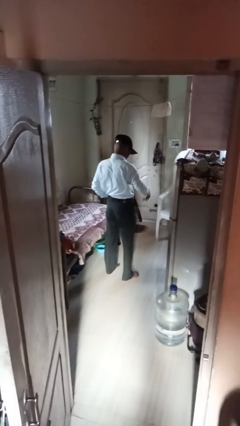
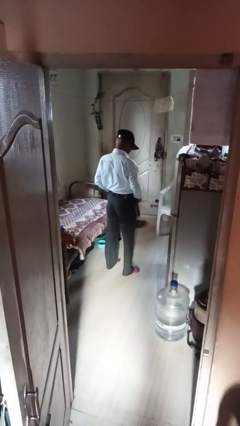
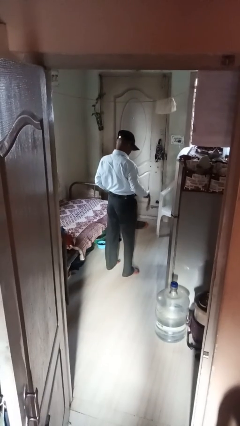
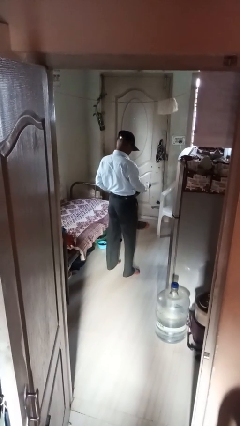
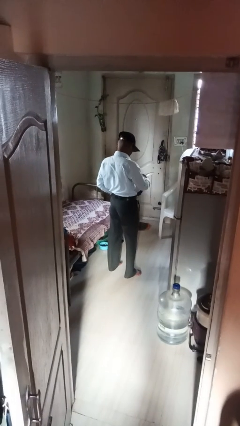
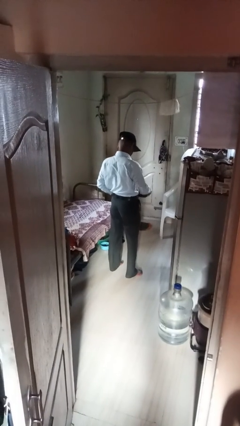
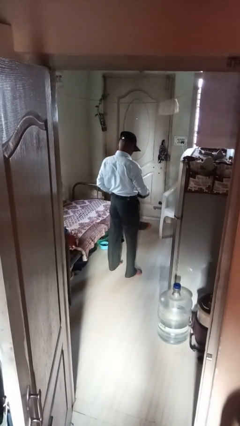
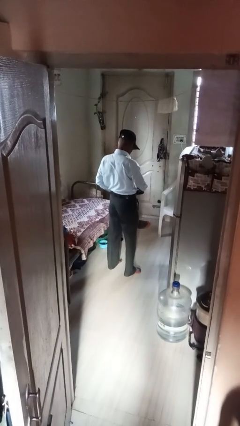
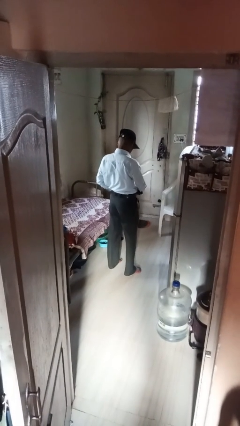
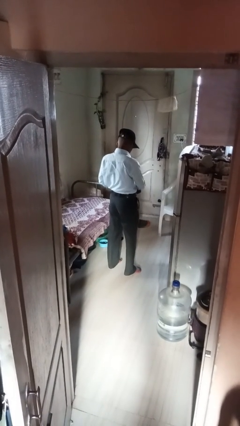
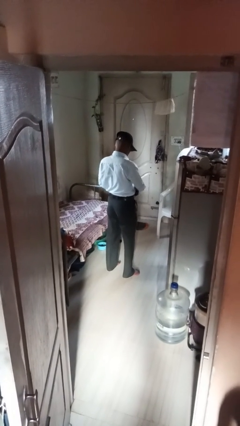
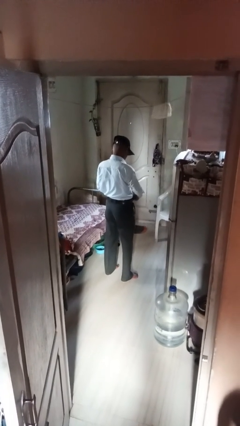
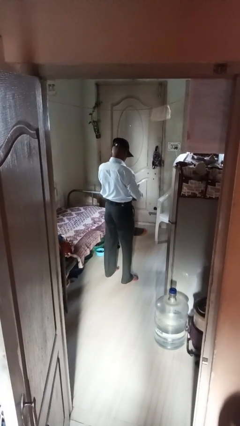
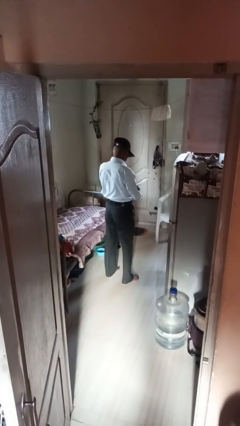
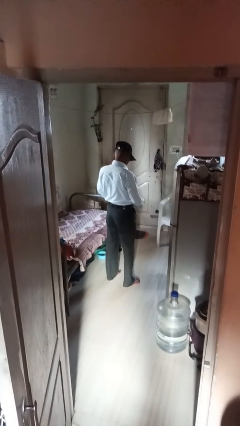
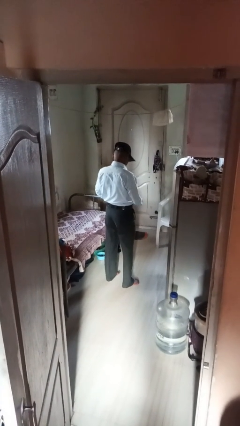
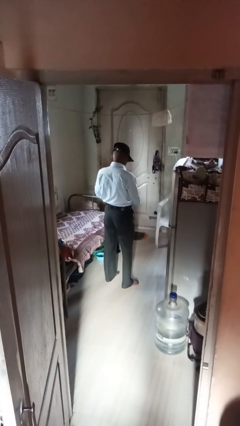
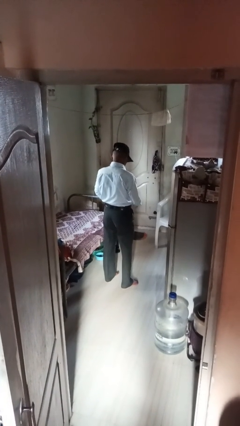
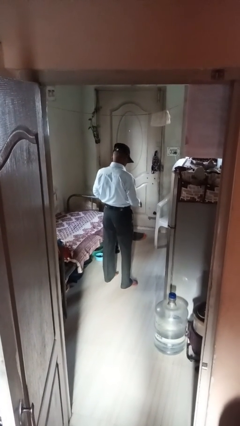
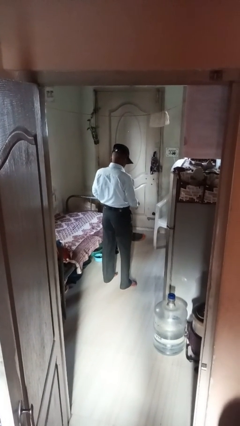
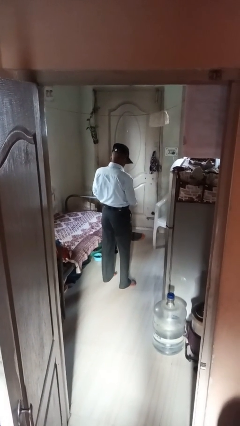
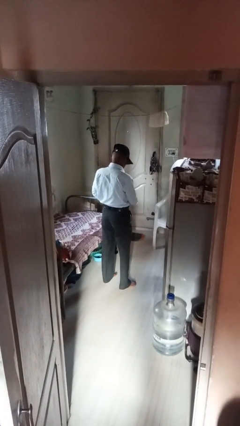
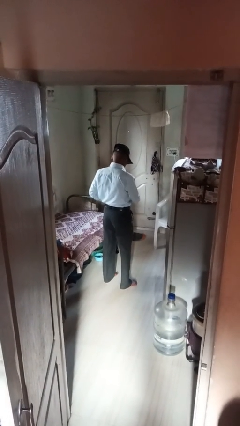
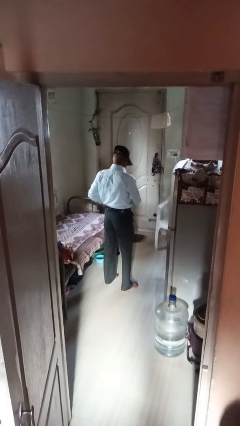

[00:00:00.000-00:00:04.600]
person puts on belt

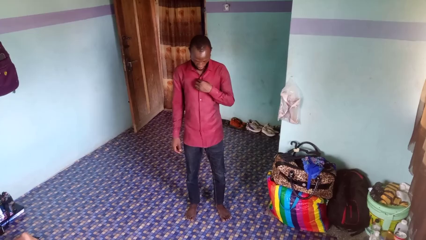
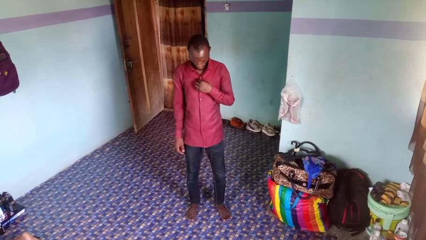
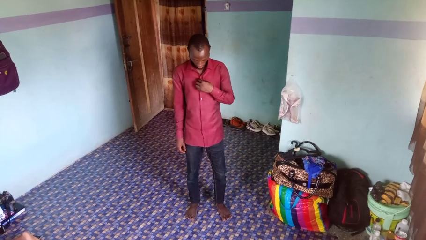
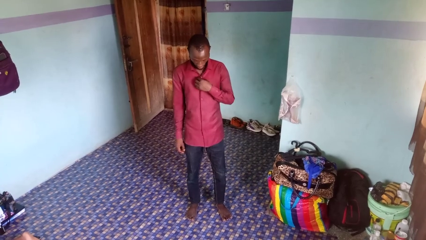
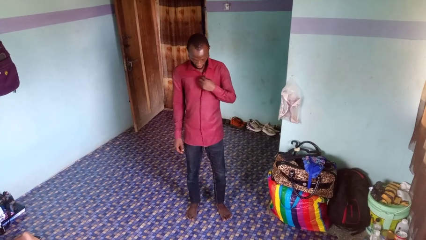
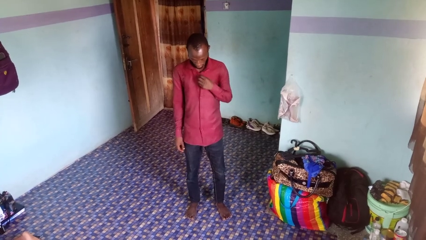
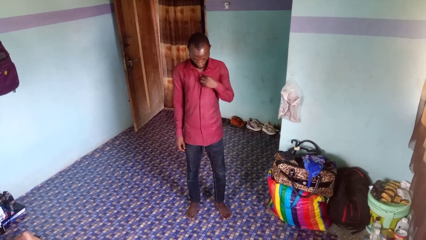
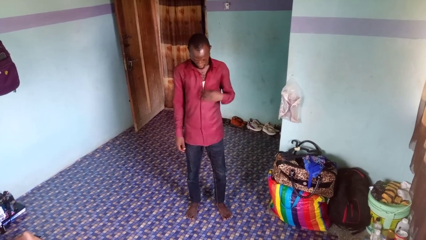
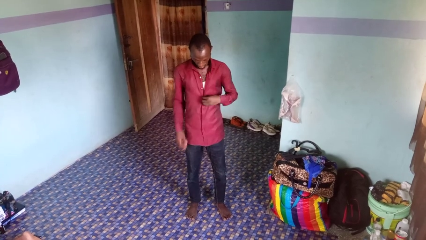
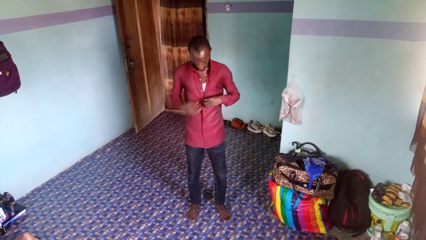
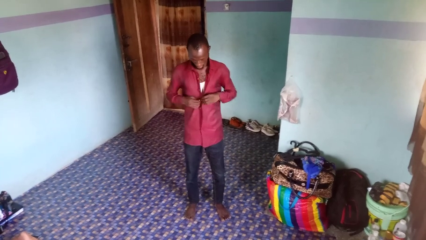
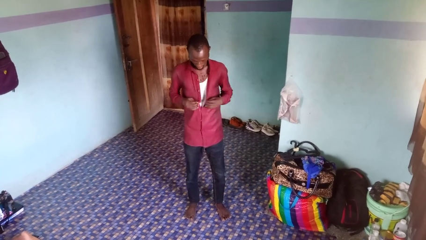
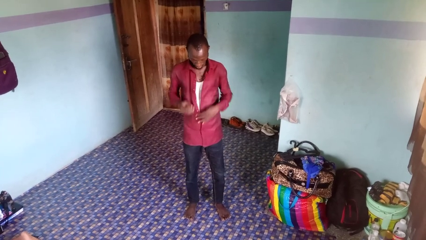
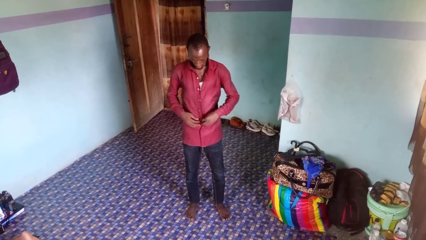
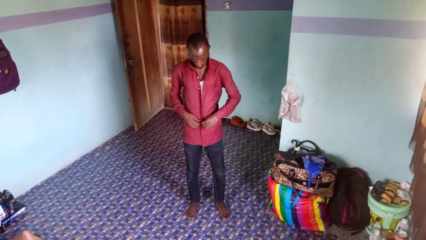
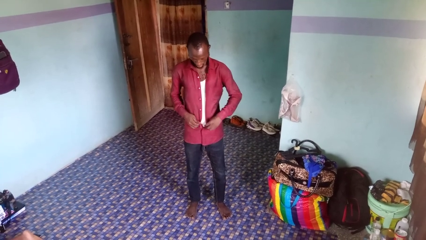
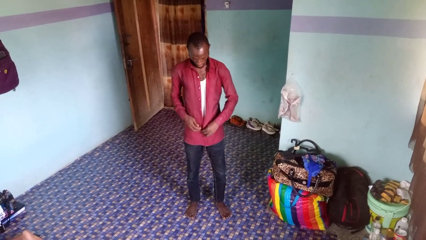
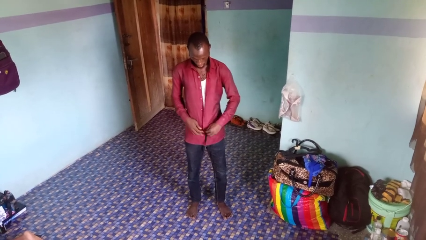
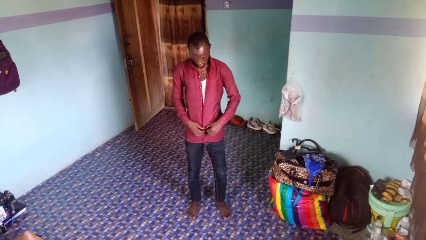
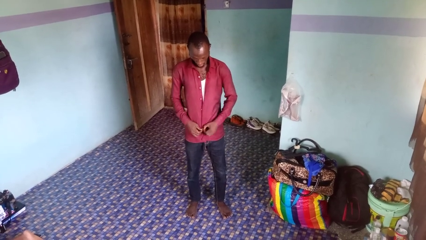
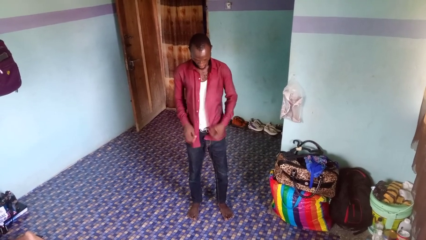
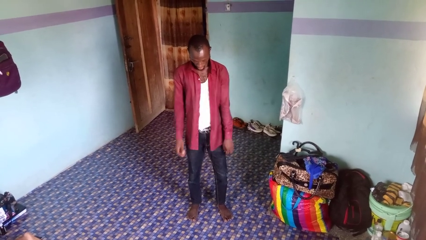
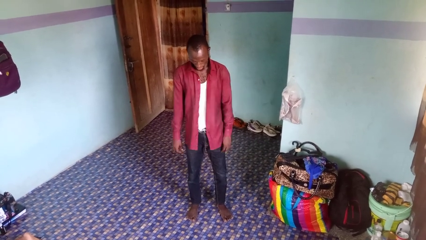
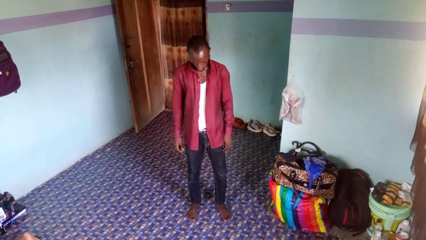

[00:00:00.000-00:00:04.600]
person unbuttons shirt

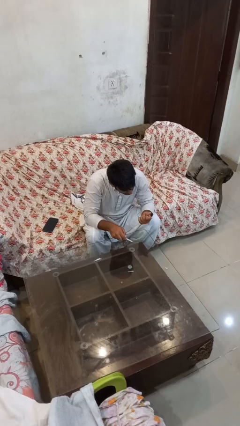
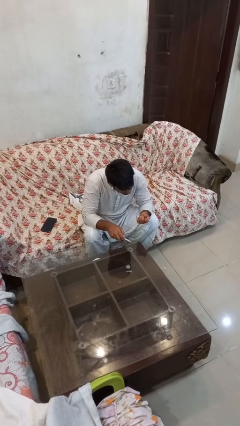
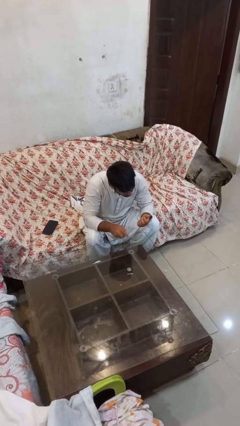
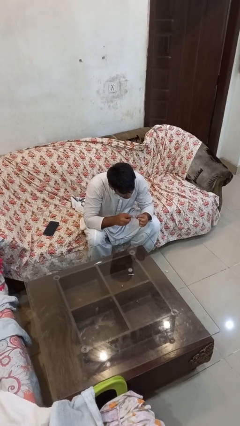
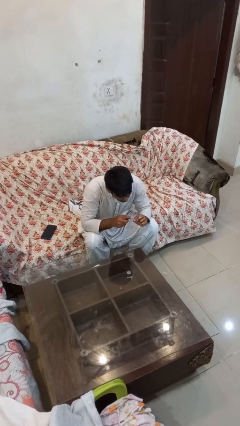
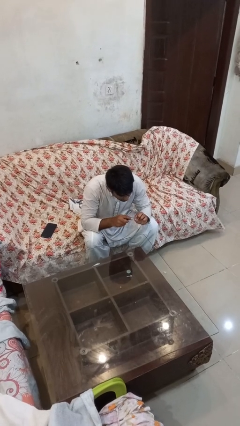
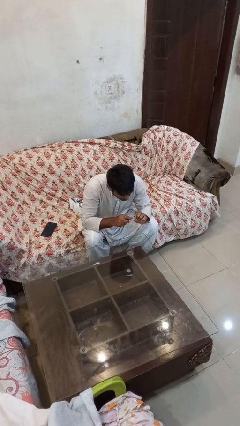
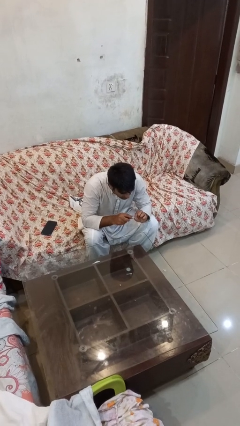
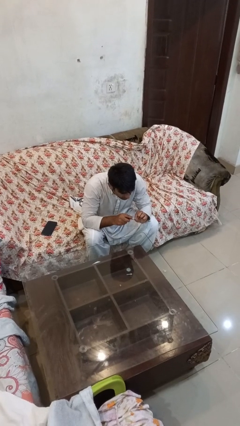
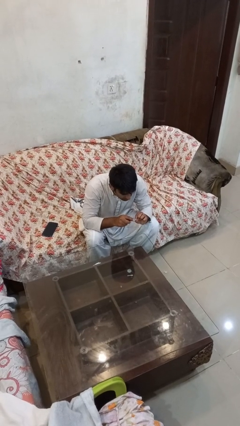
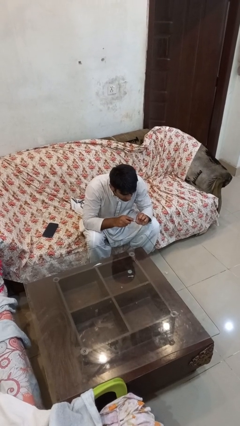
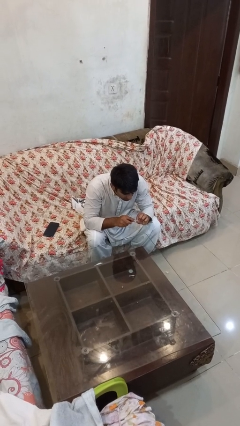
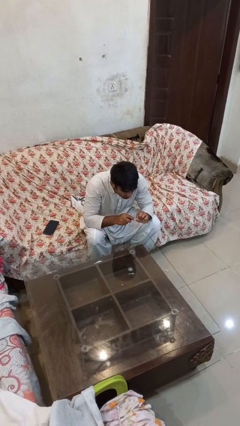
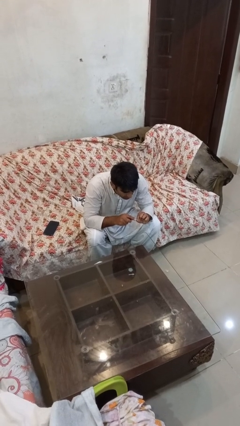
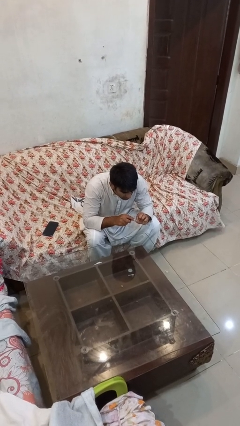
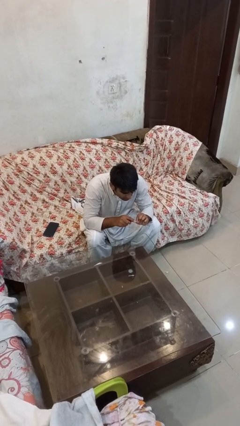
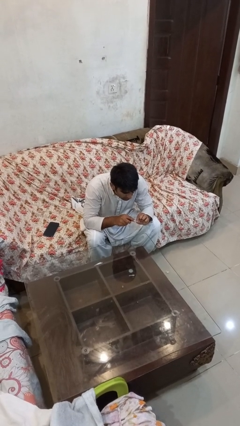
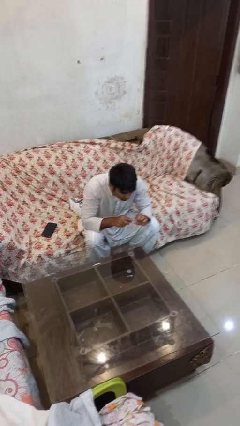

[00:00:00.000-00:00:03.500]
person files fingernails

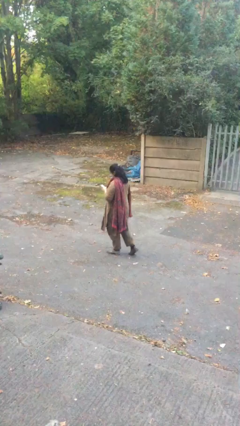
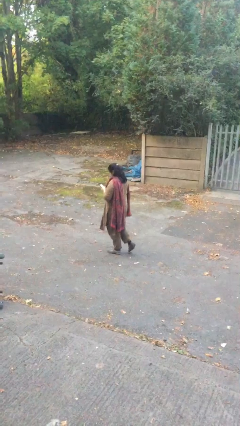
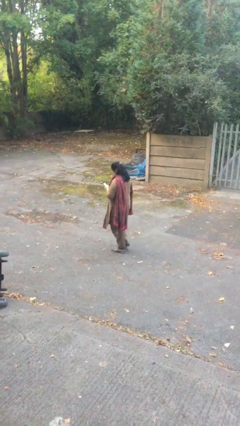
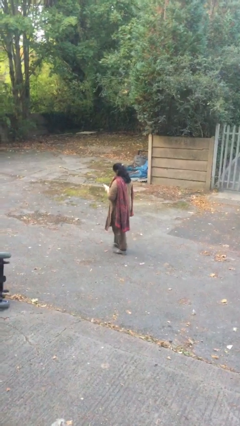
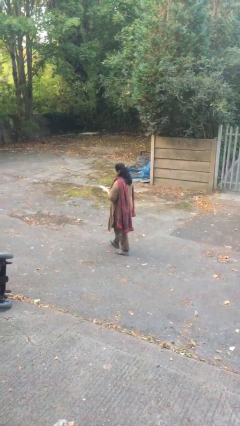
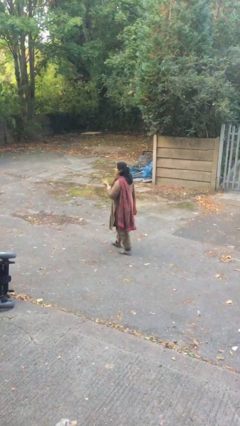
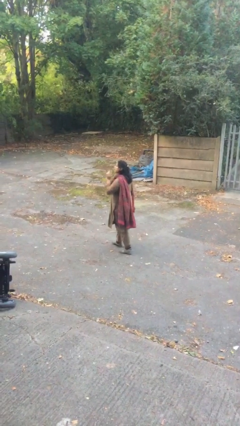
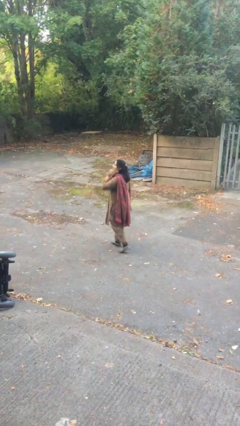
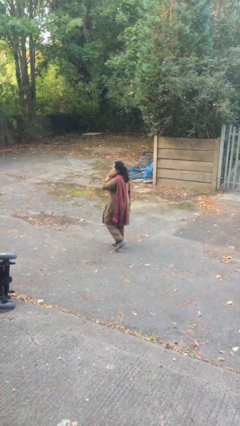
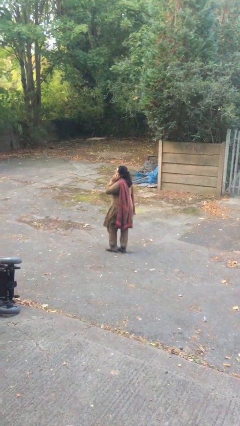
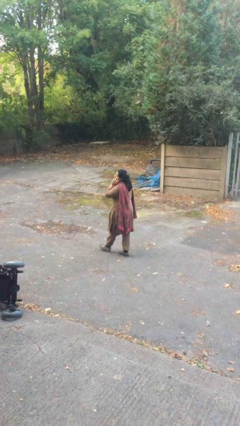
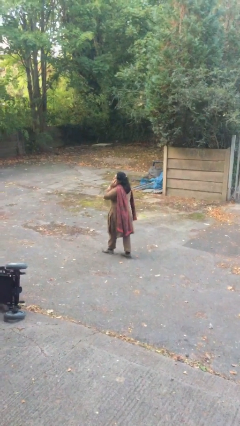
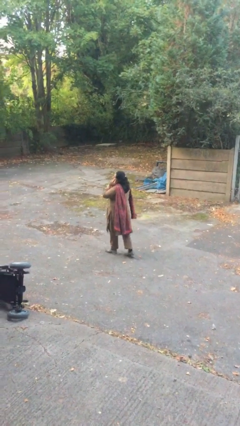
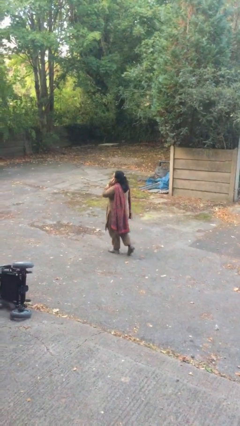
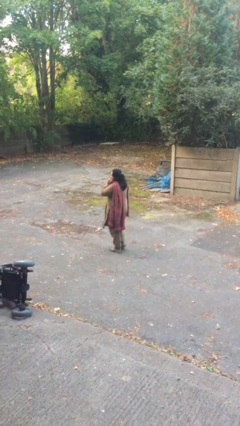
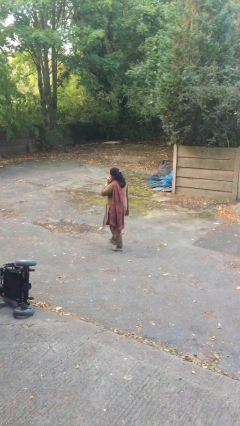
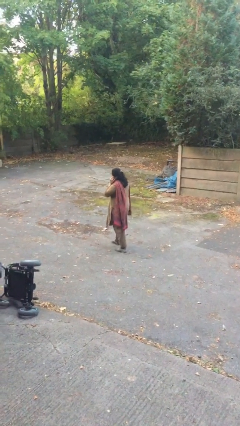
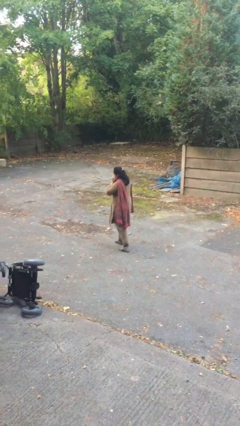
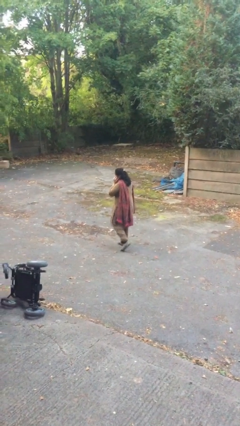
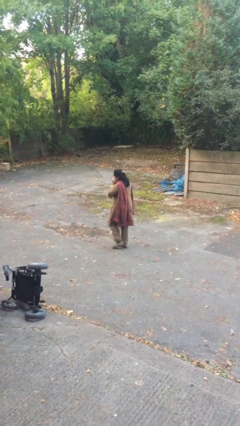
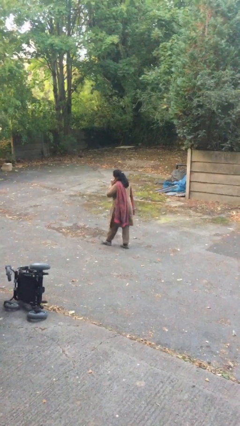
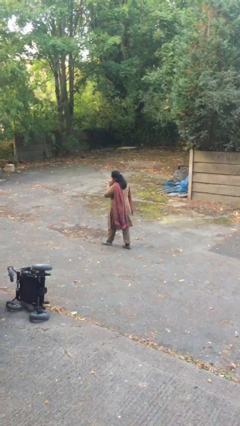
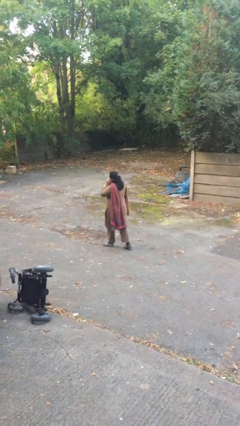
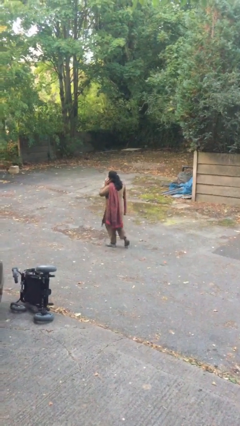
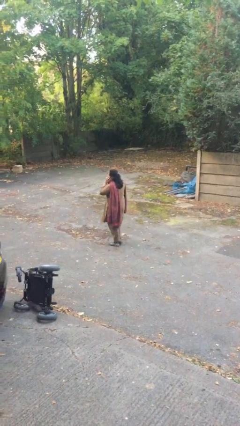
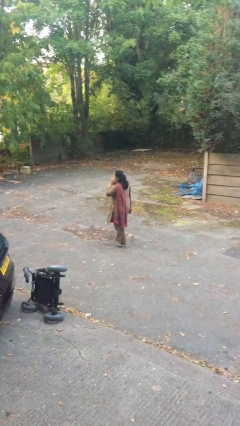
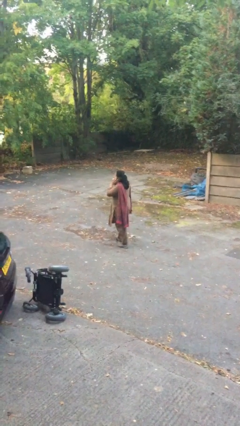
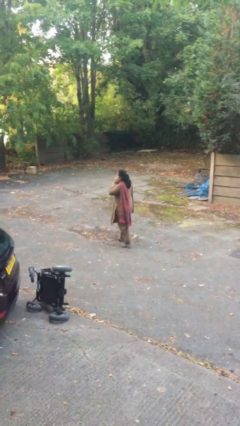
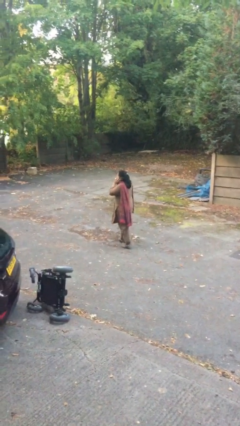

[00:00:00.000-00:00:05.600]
person talks on phone
